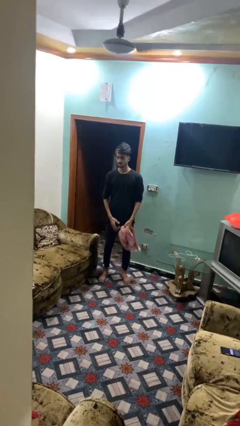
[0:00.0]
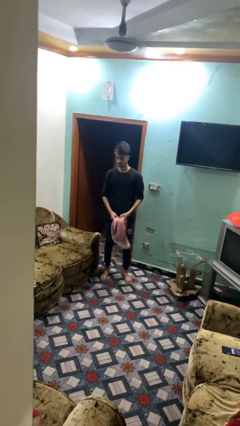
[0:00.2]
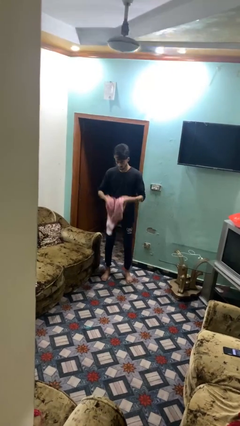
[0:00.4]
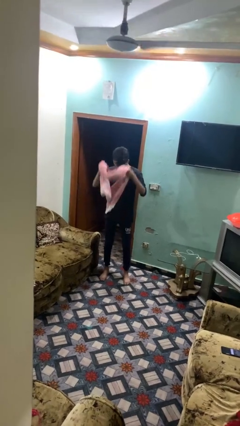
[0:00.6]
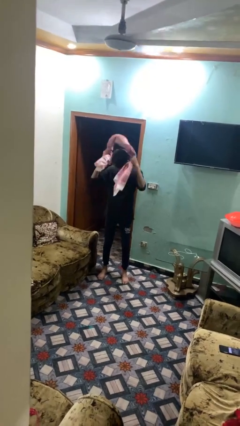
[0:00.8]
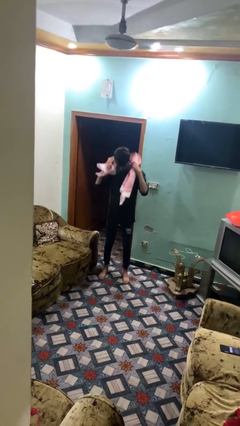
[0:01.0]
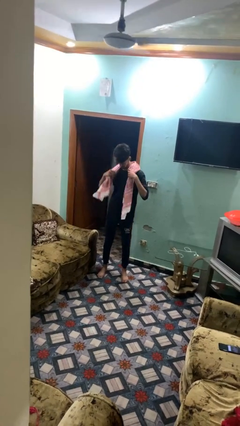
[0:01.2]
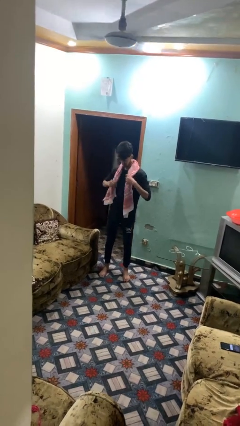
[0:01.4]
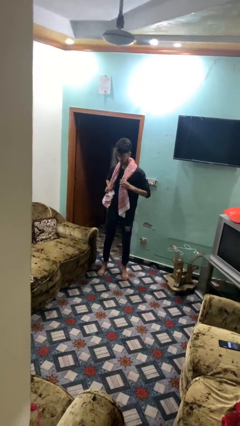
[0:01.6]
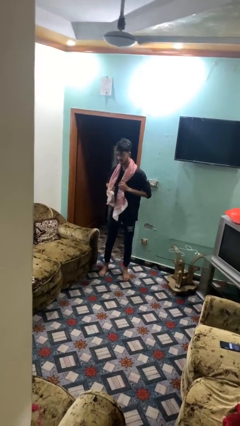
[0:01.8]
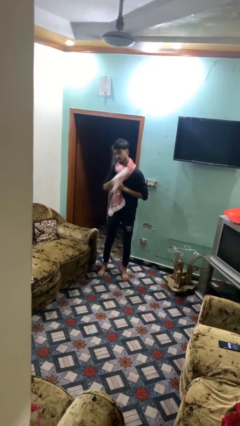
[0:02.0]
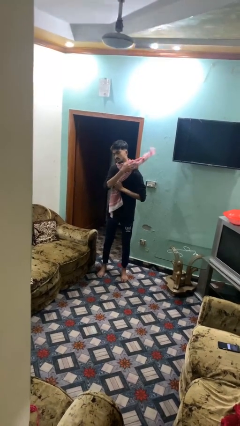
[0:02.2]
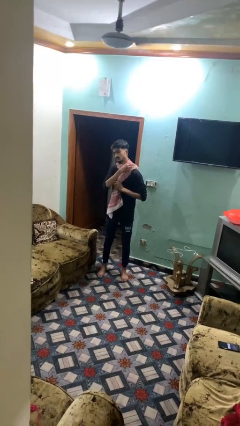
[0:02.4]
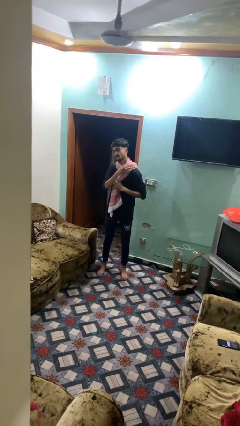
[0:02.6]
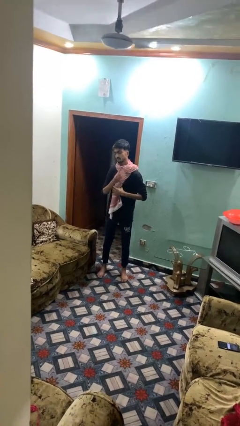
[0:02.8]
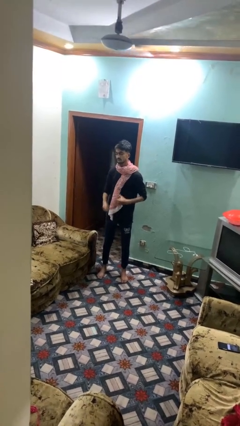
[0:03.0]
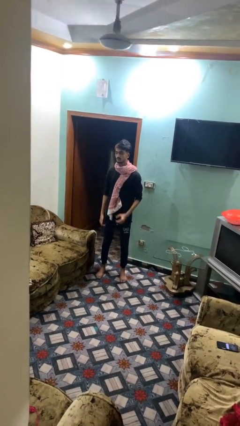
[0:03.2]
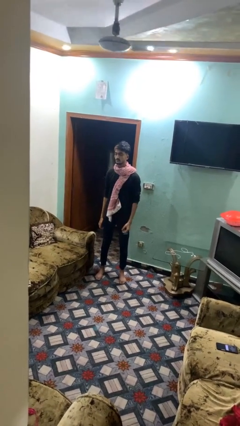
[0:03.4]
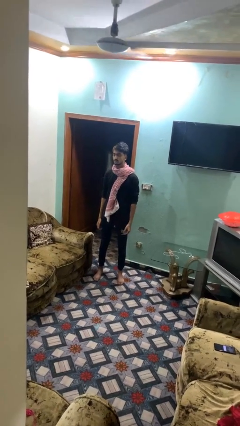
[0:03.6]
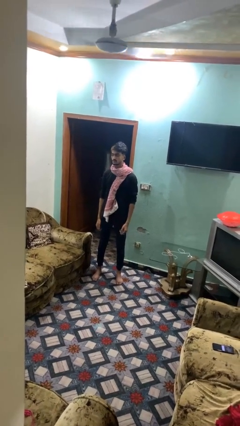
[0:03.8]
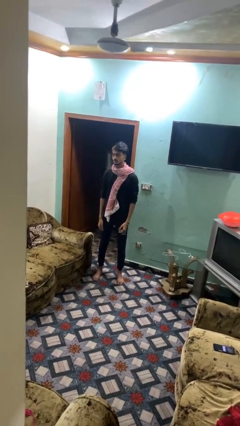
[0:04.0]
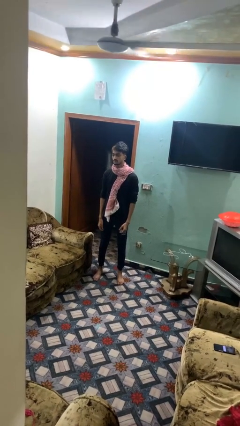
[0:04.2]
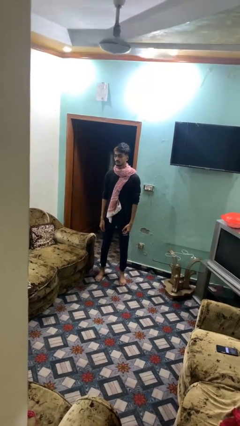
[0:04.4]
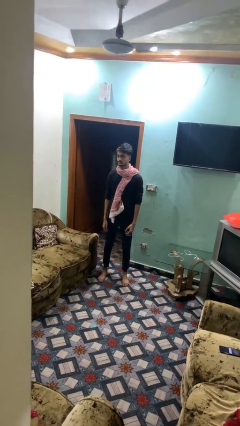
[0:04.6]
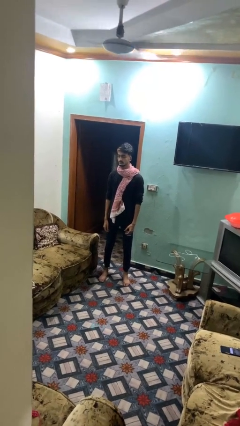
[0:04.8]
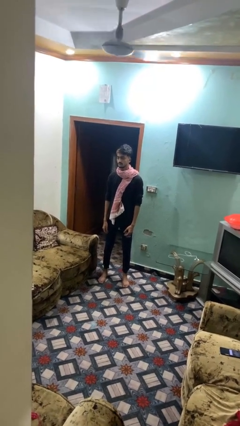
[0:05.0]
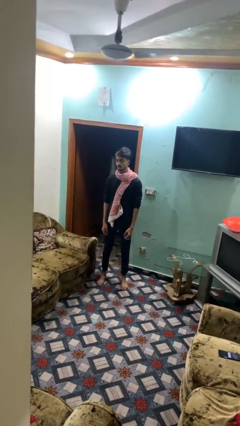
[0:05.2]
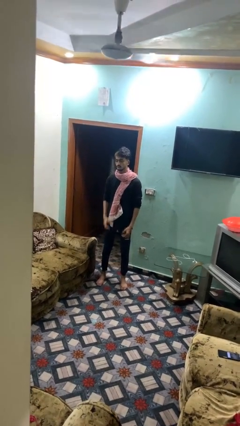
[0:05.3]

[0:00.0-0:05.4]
person puts on scarf

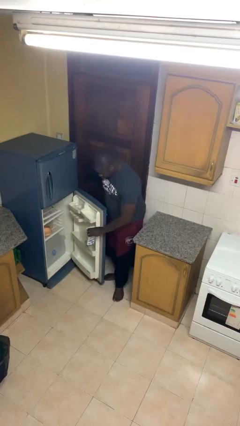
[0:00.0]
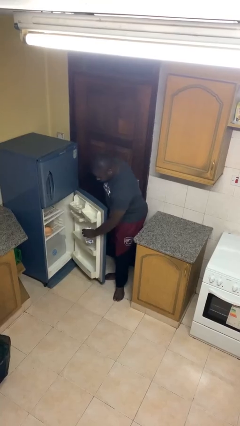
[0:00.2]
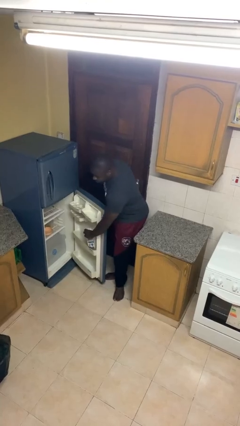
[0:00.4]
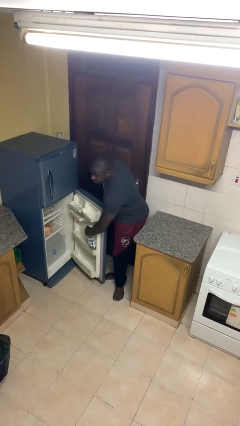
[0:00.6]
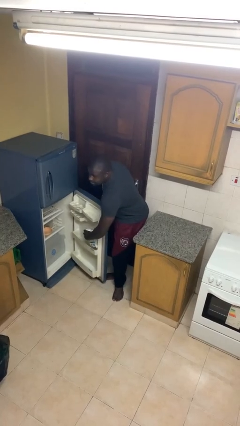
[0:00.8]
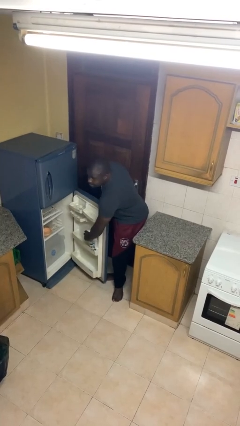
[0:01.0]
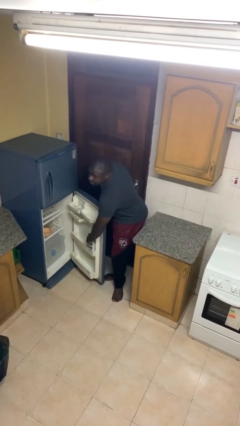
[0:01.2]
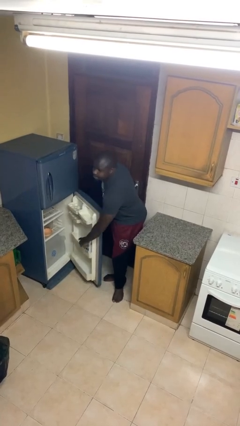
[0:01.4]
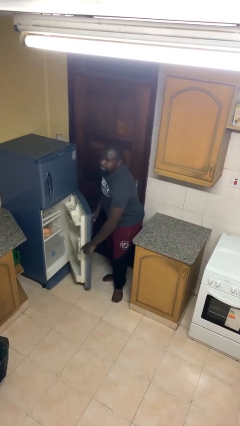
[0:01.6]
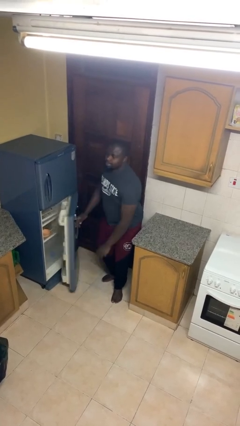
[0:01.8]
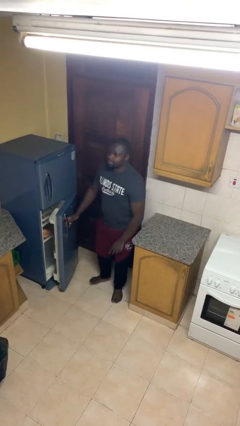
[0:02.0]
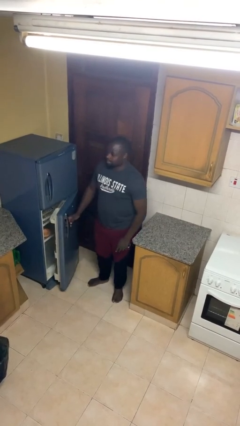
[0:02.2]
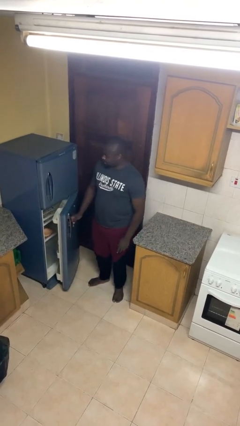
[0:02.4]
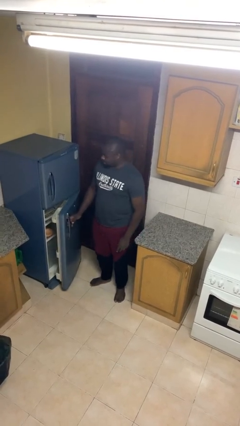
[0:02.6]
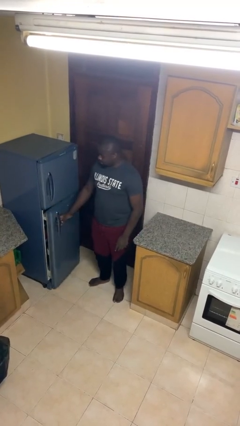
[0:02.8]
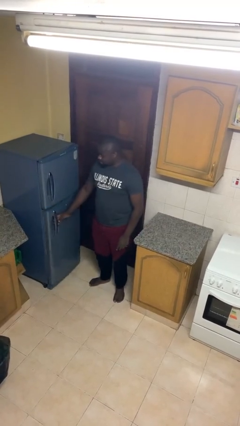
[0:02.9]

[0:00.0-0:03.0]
person puts object into refrigerator

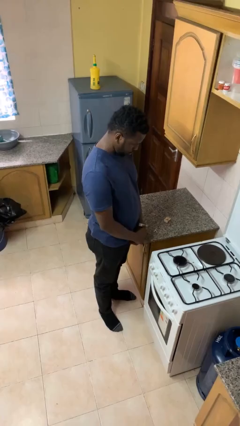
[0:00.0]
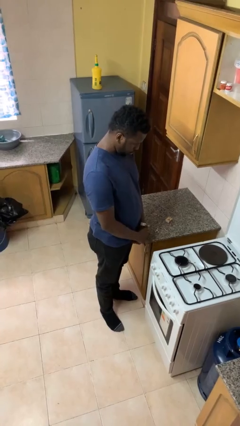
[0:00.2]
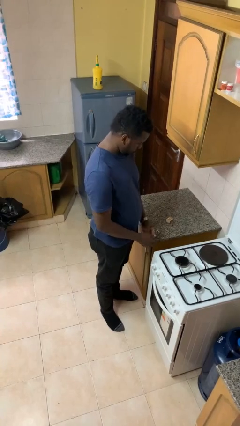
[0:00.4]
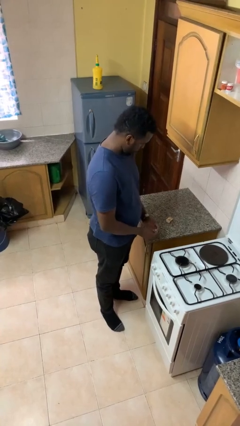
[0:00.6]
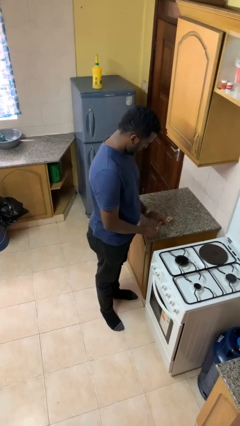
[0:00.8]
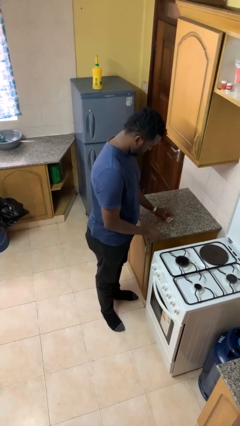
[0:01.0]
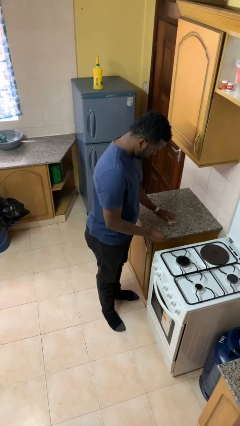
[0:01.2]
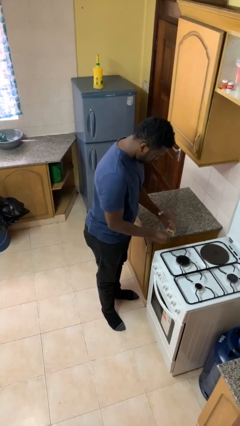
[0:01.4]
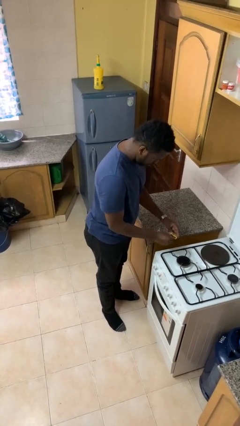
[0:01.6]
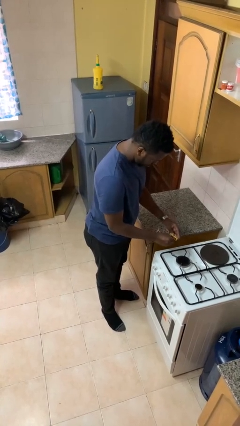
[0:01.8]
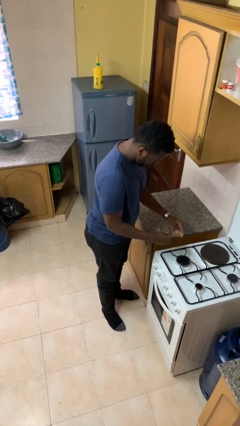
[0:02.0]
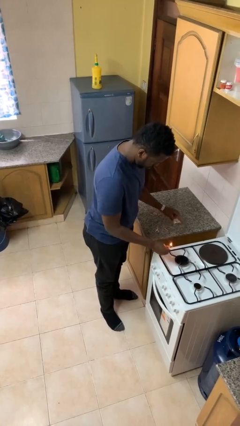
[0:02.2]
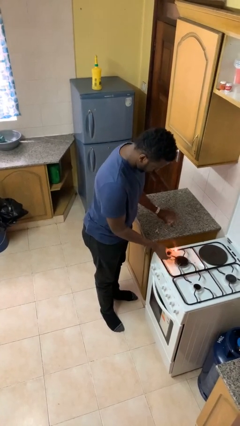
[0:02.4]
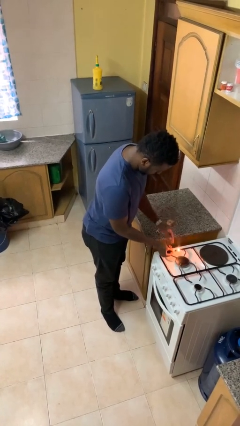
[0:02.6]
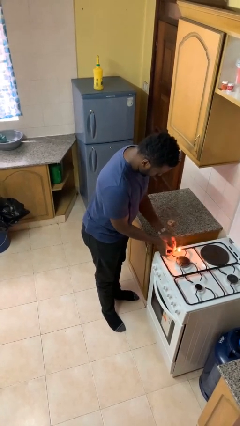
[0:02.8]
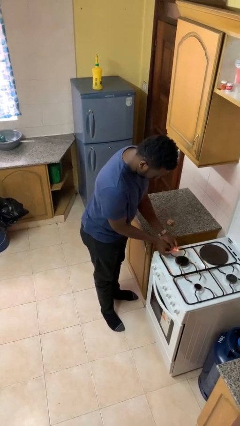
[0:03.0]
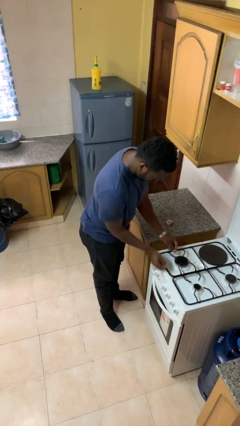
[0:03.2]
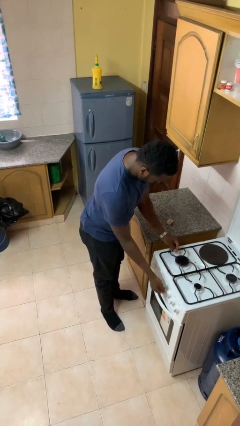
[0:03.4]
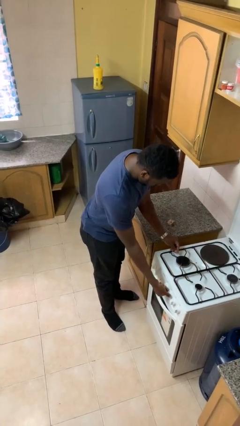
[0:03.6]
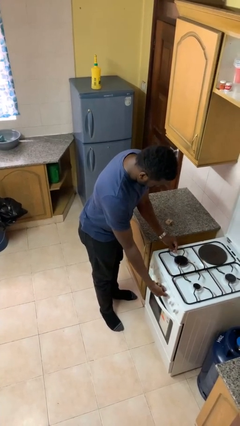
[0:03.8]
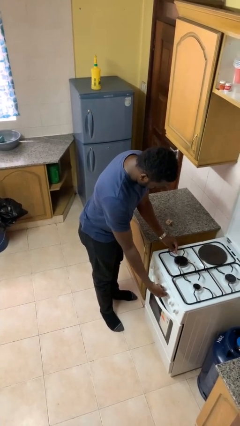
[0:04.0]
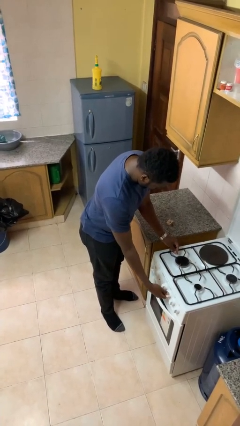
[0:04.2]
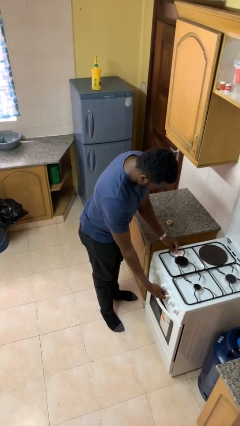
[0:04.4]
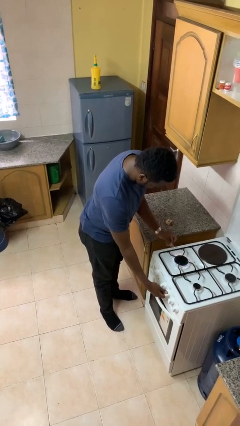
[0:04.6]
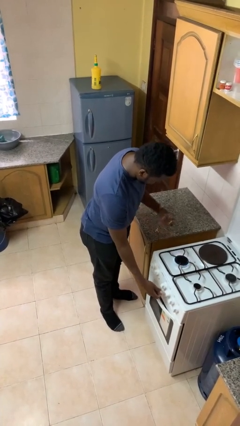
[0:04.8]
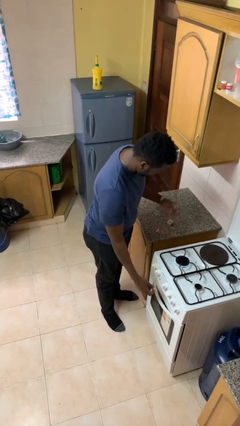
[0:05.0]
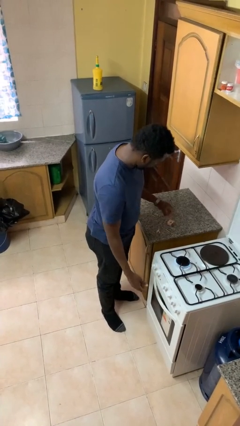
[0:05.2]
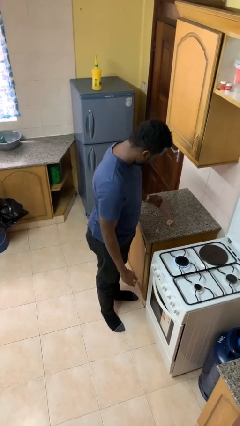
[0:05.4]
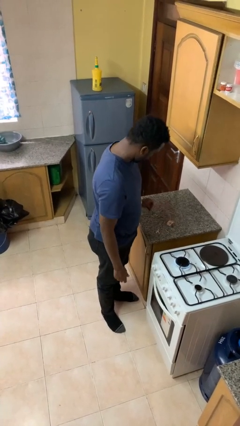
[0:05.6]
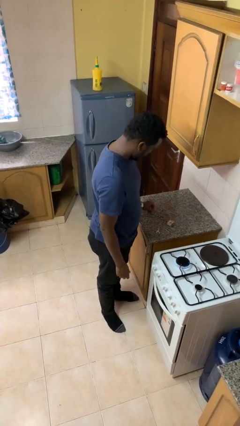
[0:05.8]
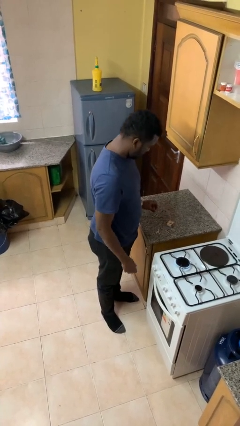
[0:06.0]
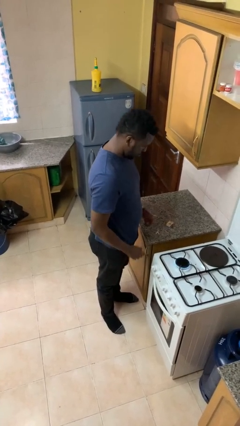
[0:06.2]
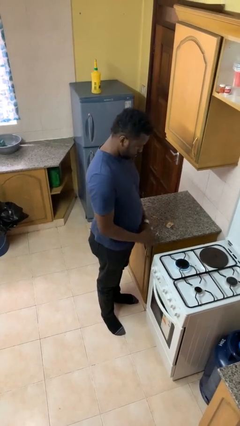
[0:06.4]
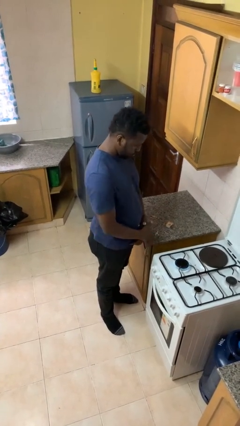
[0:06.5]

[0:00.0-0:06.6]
person turns on stovetop

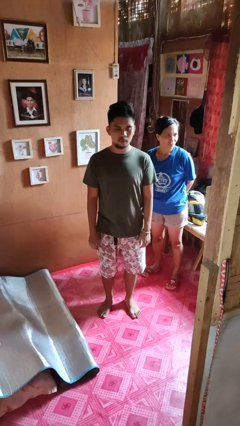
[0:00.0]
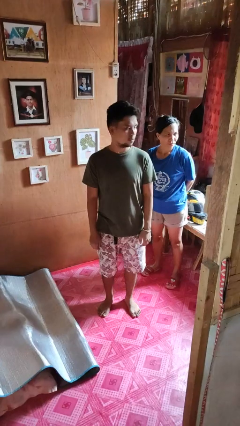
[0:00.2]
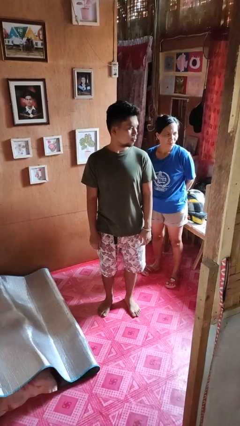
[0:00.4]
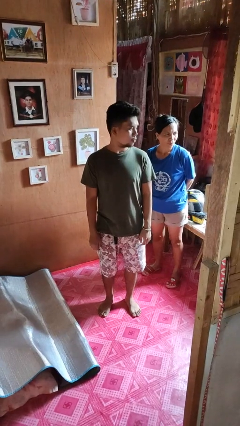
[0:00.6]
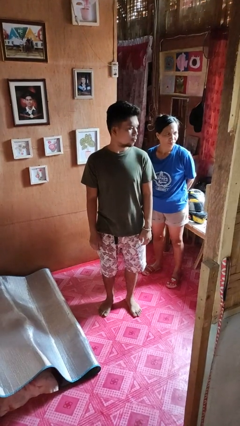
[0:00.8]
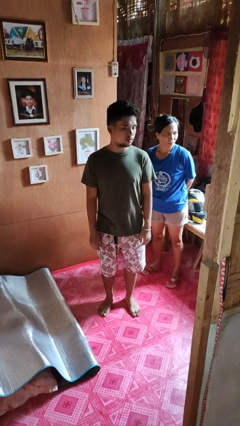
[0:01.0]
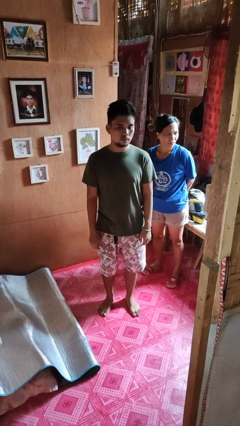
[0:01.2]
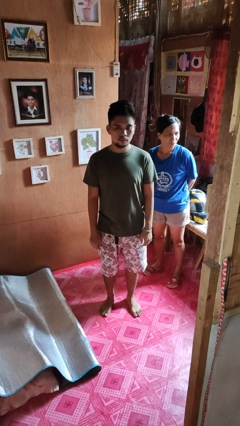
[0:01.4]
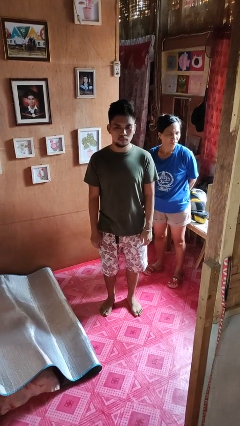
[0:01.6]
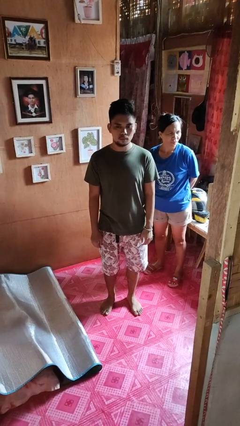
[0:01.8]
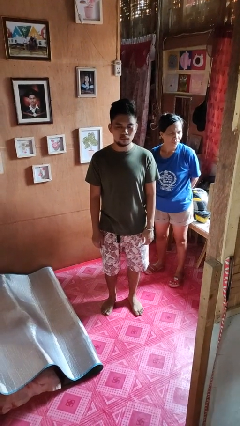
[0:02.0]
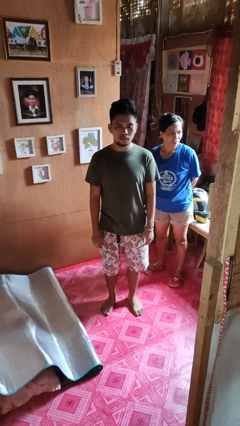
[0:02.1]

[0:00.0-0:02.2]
person looks over shoulder
